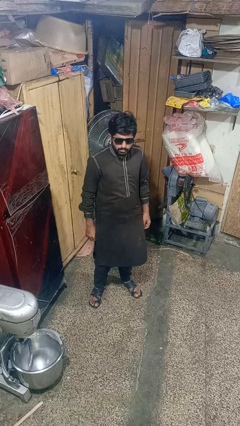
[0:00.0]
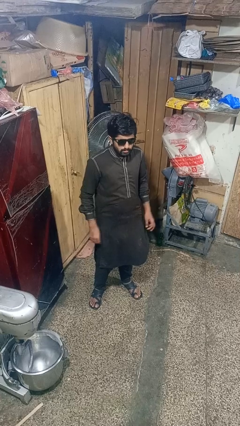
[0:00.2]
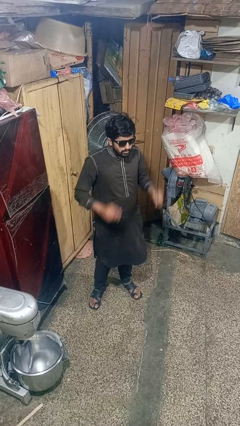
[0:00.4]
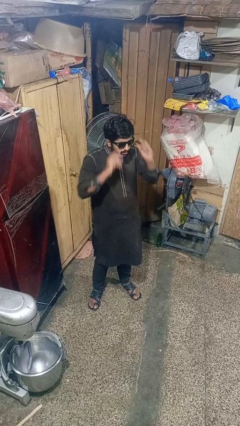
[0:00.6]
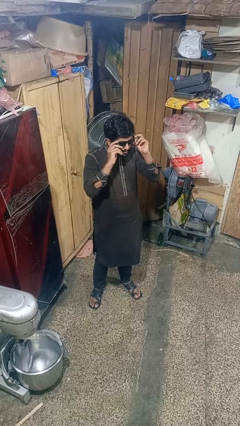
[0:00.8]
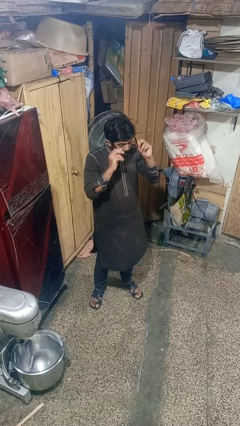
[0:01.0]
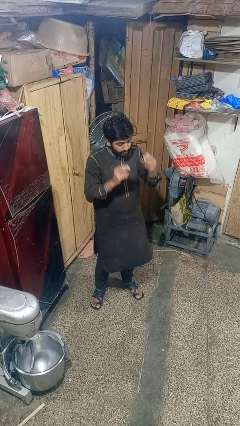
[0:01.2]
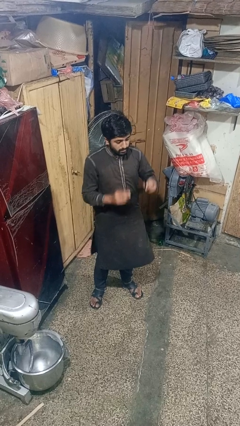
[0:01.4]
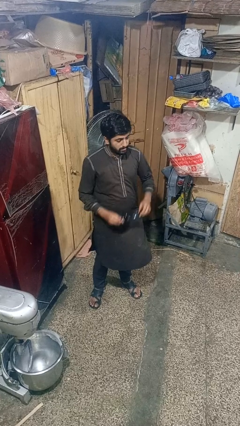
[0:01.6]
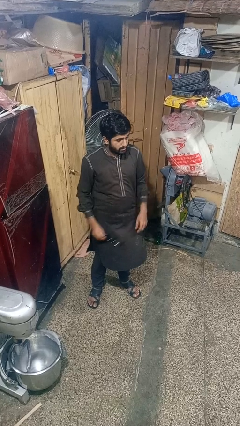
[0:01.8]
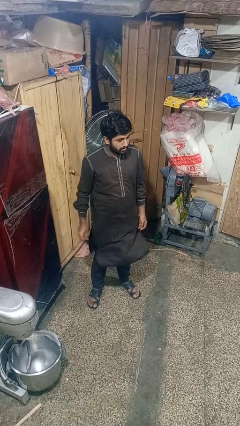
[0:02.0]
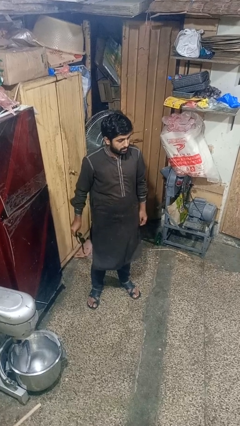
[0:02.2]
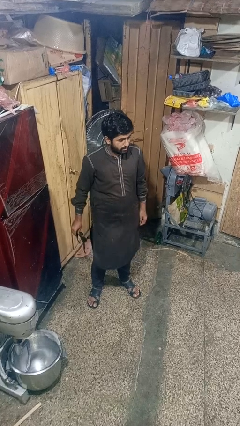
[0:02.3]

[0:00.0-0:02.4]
person takes off sunglasses

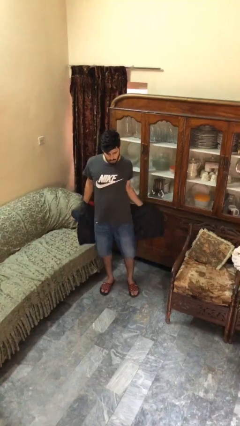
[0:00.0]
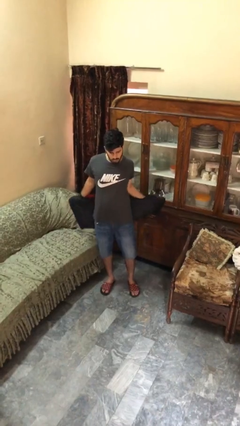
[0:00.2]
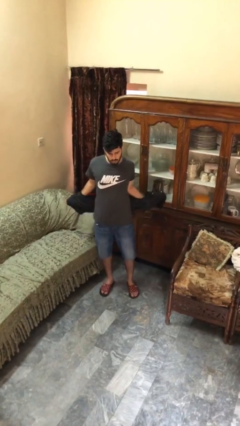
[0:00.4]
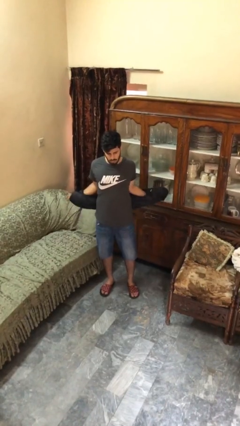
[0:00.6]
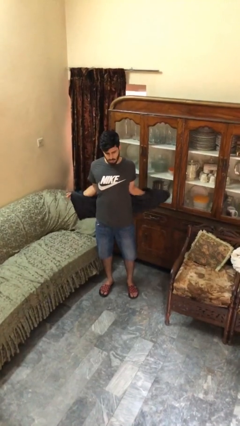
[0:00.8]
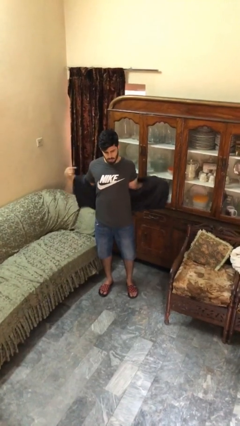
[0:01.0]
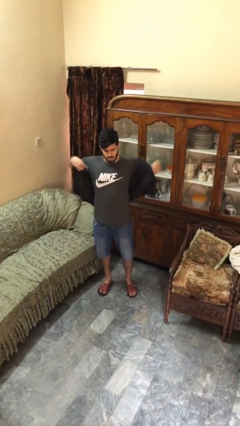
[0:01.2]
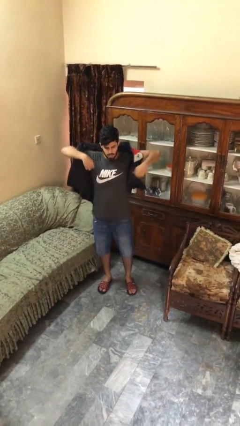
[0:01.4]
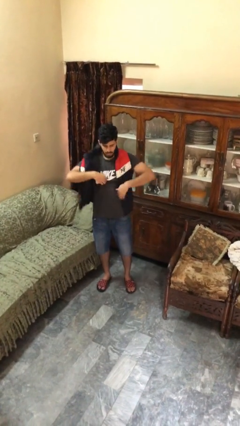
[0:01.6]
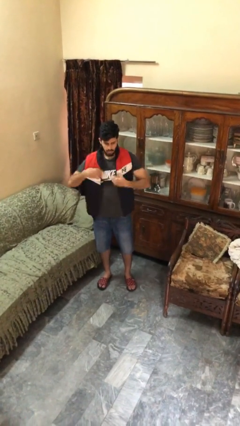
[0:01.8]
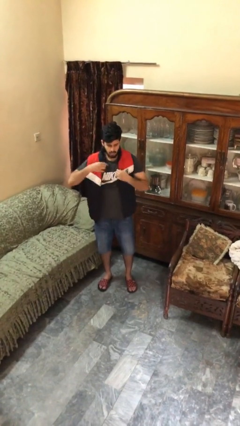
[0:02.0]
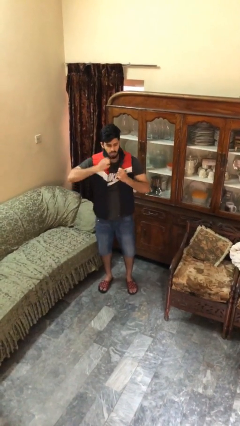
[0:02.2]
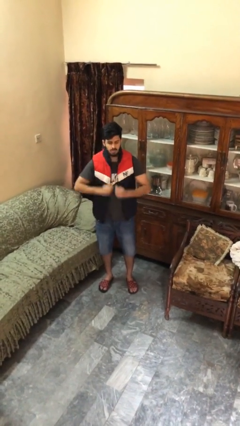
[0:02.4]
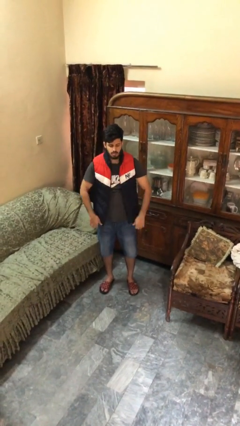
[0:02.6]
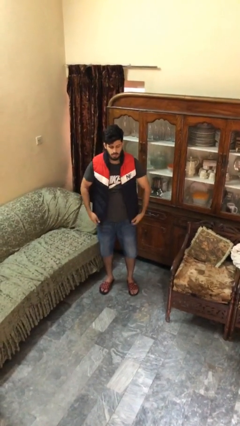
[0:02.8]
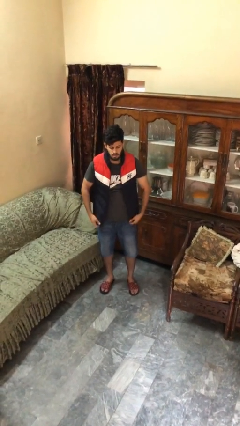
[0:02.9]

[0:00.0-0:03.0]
person puts on jacket

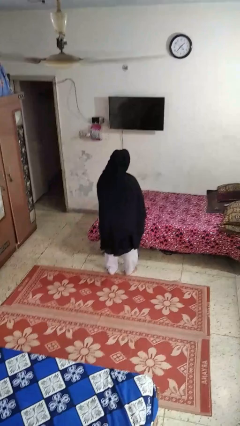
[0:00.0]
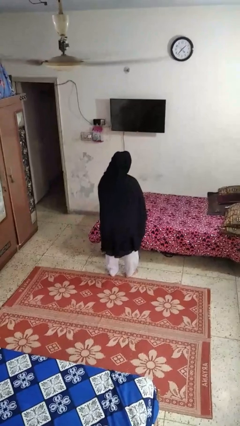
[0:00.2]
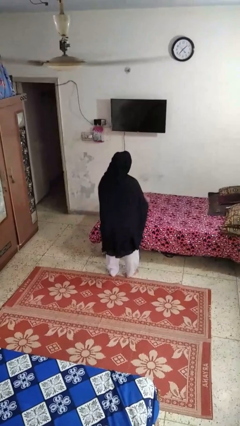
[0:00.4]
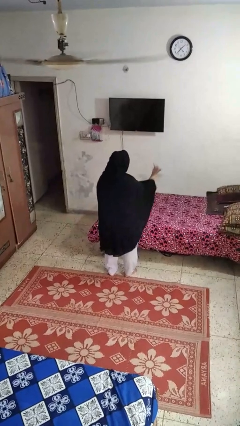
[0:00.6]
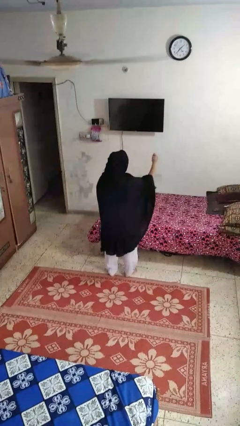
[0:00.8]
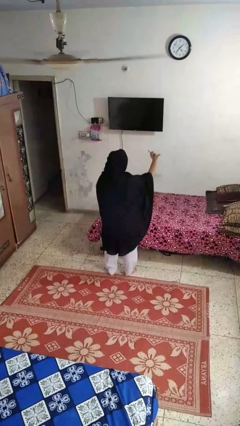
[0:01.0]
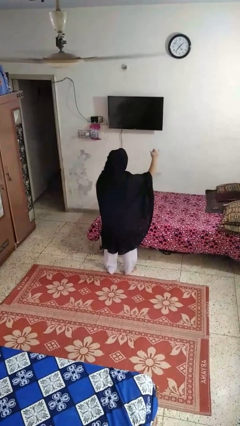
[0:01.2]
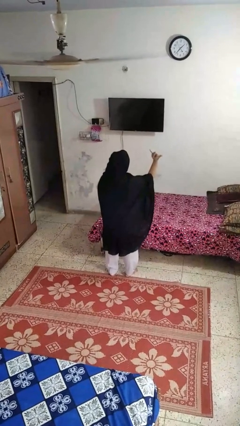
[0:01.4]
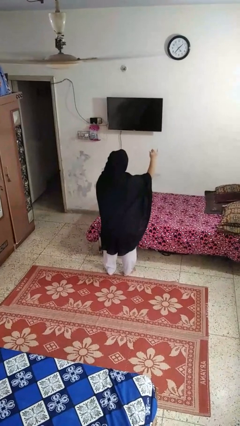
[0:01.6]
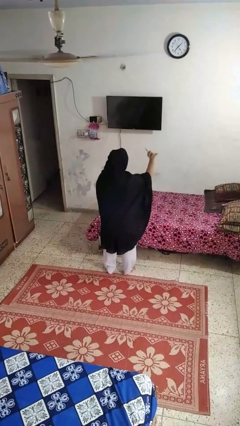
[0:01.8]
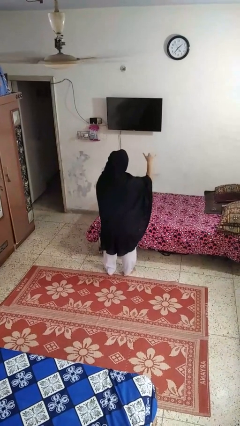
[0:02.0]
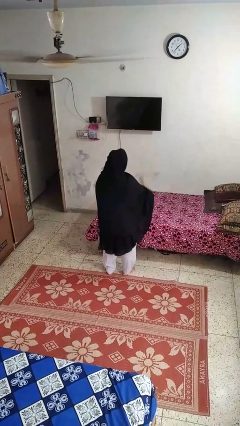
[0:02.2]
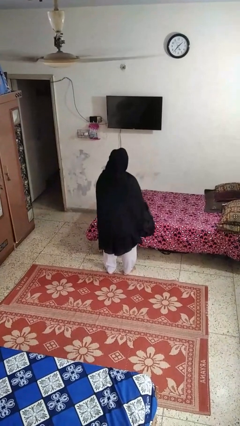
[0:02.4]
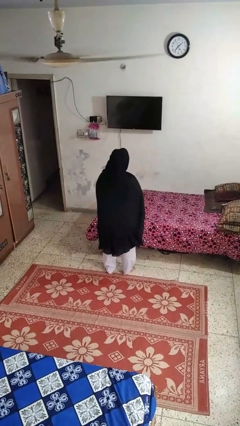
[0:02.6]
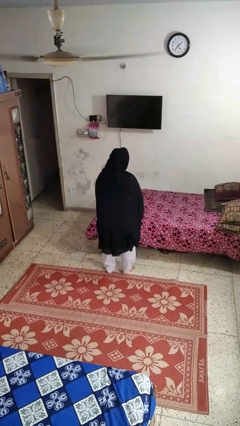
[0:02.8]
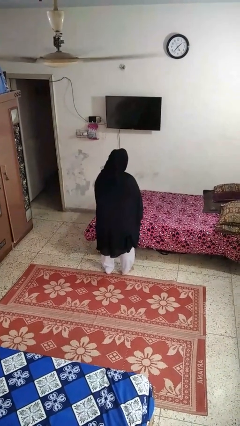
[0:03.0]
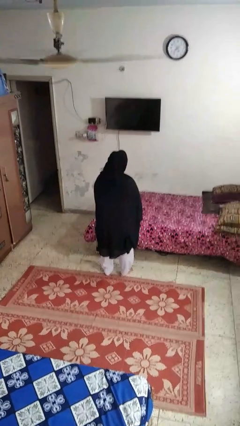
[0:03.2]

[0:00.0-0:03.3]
person gestures hang loose

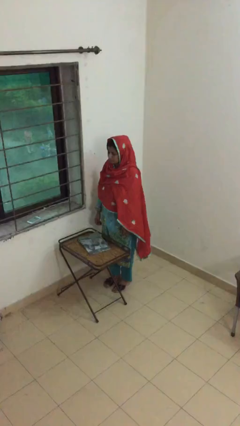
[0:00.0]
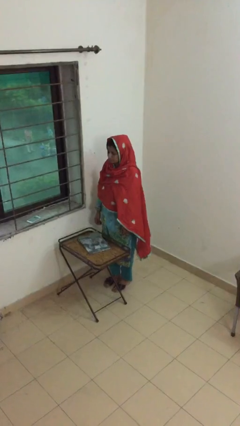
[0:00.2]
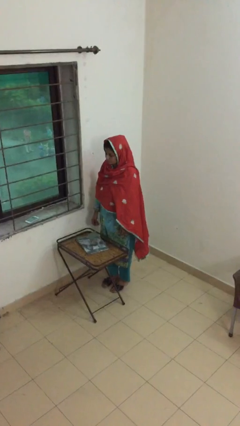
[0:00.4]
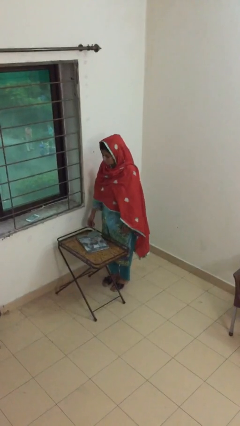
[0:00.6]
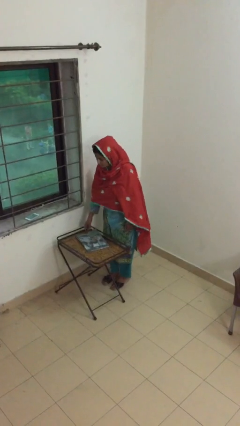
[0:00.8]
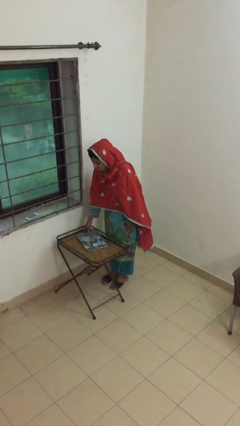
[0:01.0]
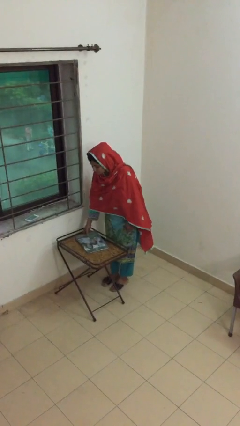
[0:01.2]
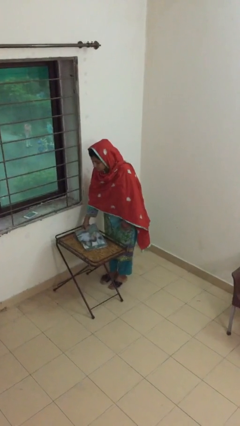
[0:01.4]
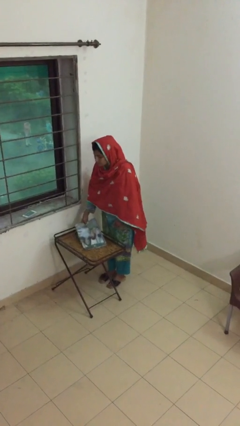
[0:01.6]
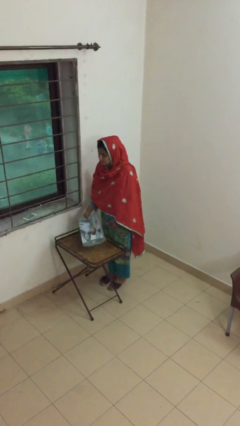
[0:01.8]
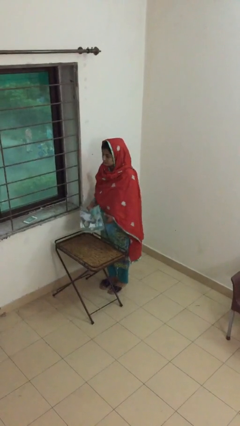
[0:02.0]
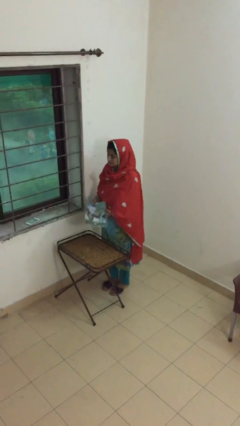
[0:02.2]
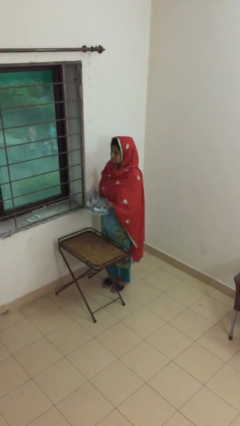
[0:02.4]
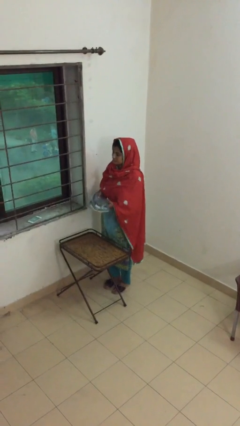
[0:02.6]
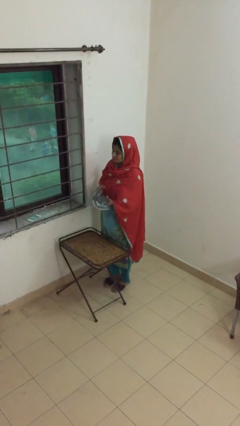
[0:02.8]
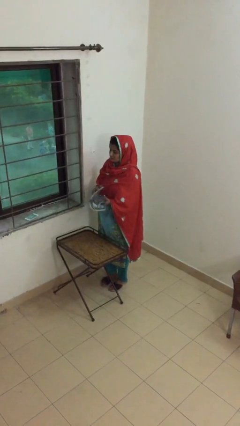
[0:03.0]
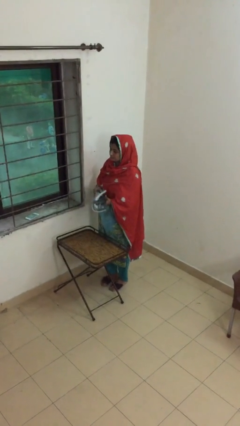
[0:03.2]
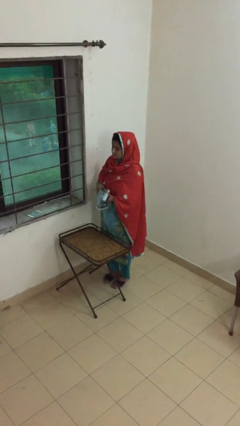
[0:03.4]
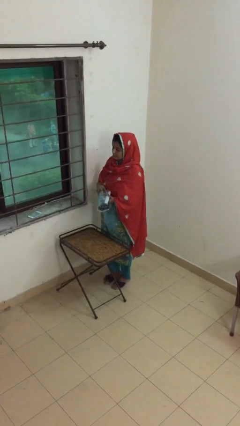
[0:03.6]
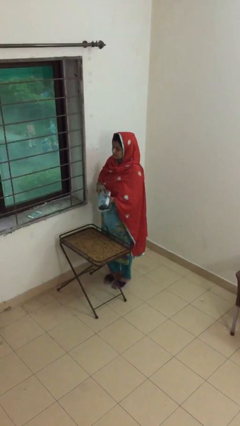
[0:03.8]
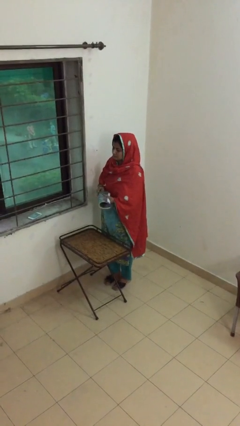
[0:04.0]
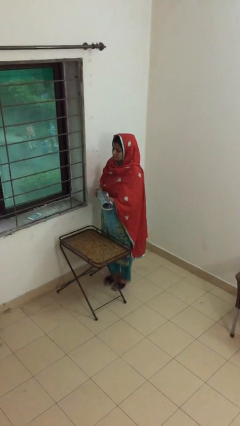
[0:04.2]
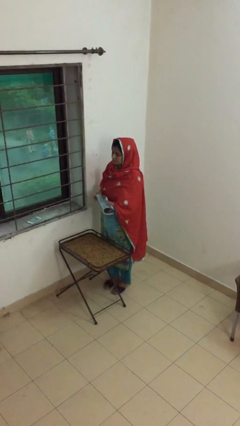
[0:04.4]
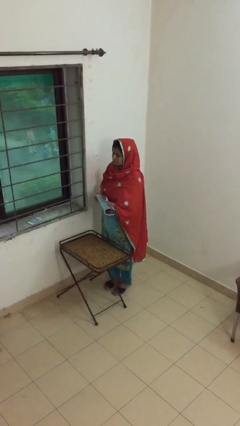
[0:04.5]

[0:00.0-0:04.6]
person picks up object from table

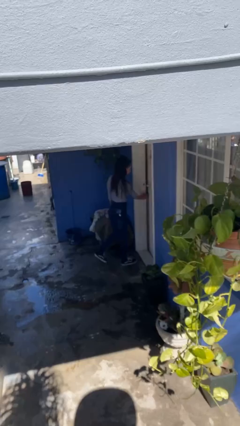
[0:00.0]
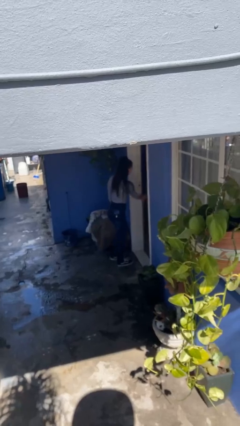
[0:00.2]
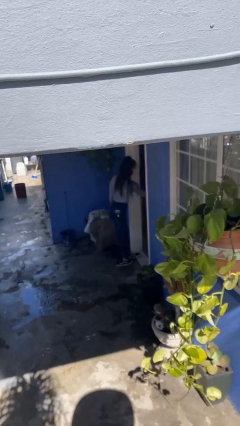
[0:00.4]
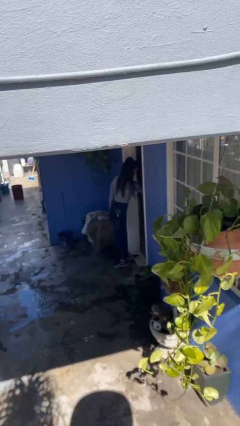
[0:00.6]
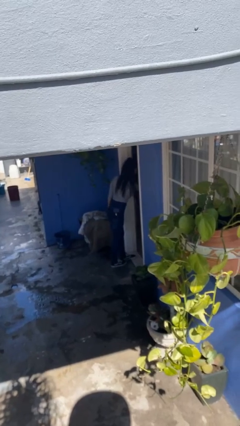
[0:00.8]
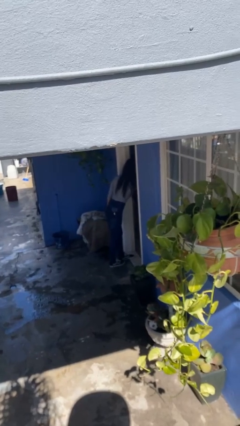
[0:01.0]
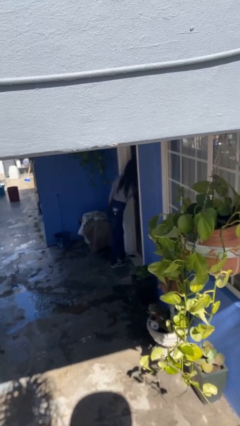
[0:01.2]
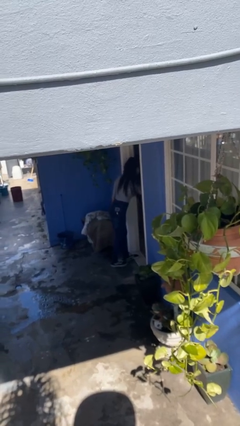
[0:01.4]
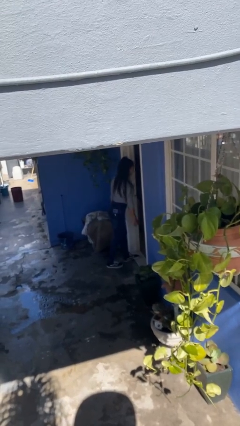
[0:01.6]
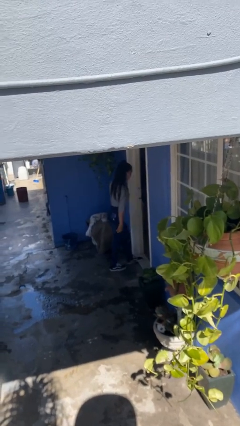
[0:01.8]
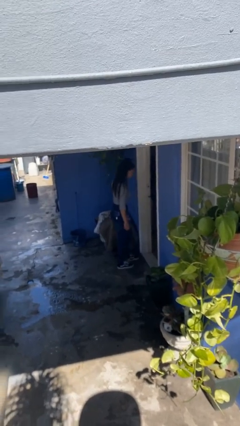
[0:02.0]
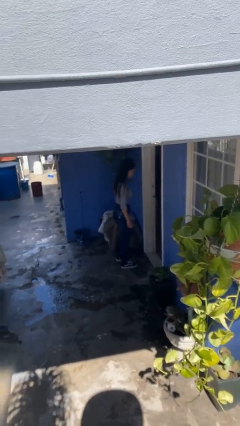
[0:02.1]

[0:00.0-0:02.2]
person opens facility door

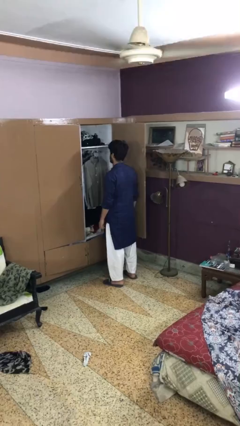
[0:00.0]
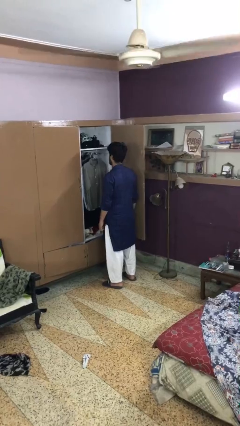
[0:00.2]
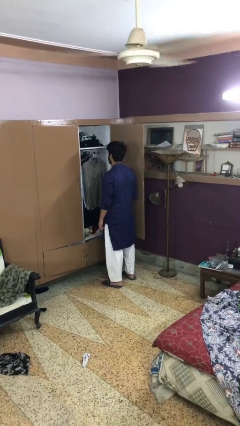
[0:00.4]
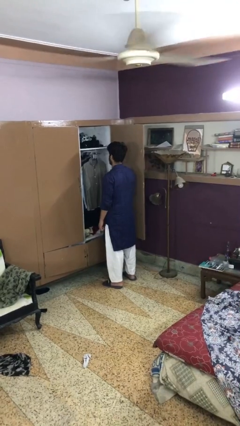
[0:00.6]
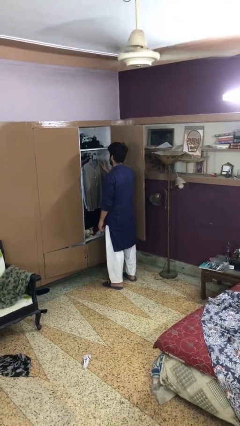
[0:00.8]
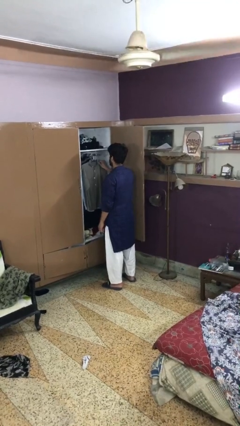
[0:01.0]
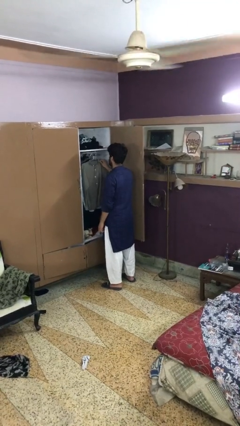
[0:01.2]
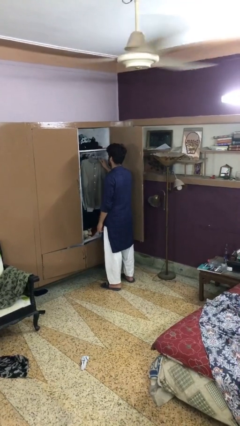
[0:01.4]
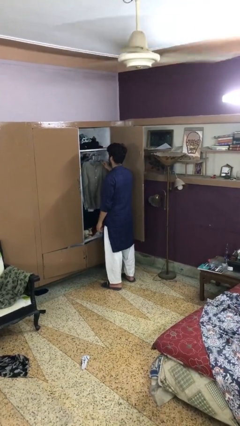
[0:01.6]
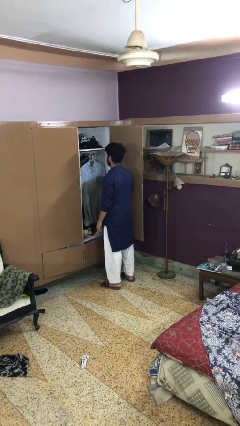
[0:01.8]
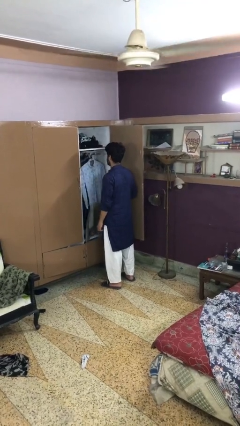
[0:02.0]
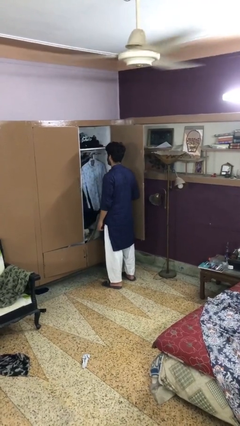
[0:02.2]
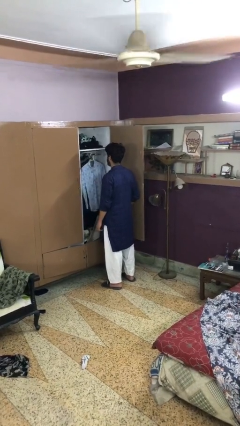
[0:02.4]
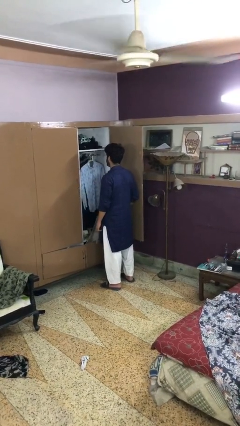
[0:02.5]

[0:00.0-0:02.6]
person takes clothes from closet
